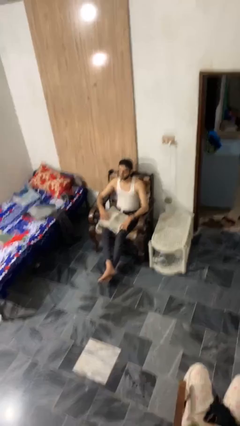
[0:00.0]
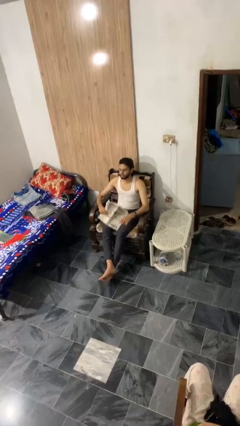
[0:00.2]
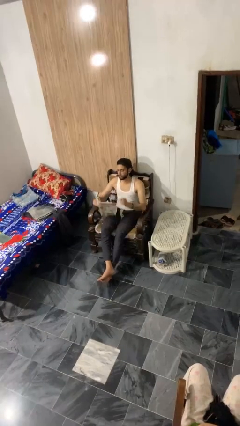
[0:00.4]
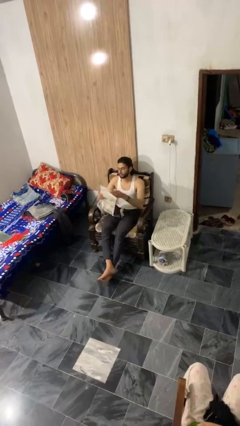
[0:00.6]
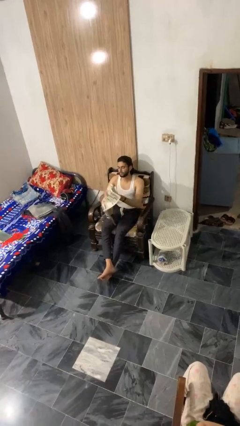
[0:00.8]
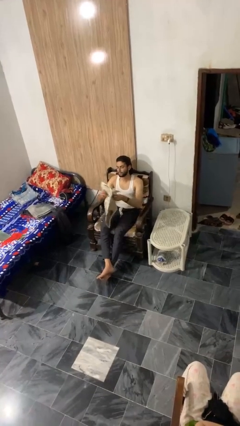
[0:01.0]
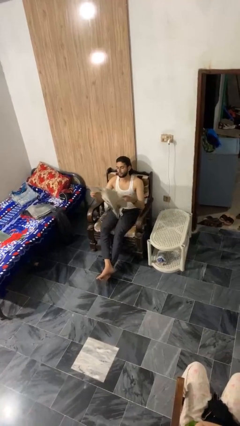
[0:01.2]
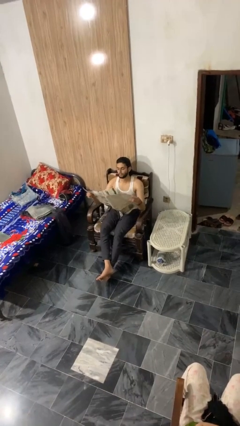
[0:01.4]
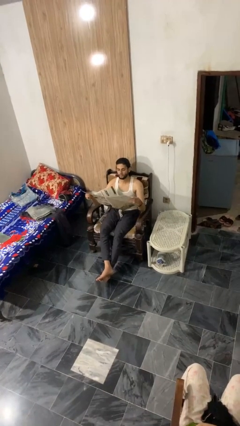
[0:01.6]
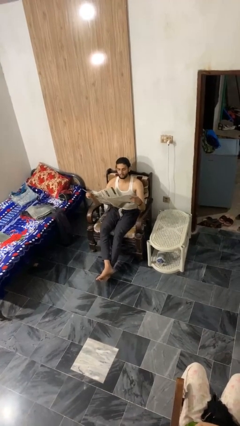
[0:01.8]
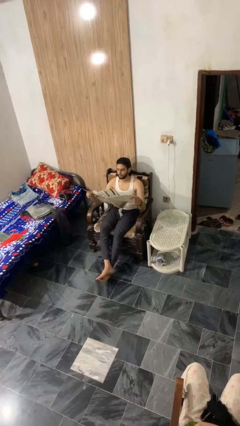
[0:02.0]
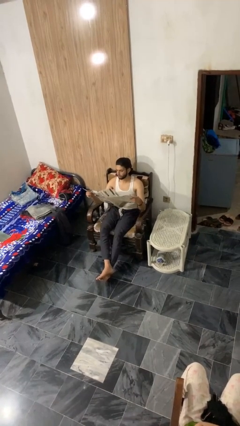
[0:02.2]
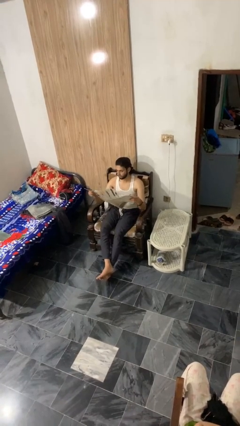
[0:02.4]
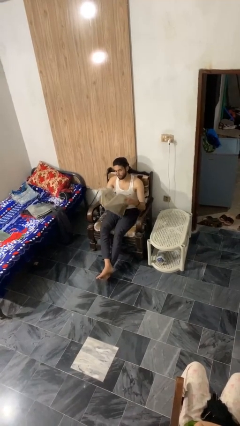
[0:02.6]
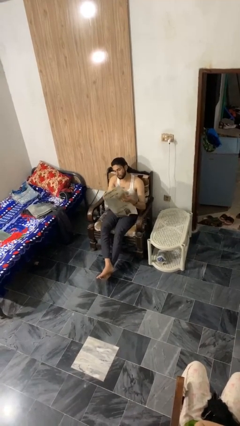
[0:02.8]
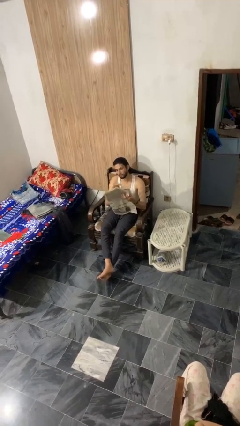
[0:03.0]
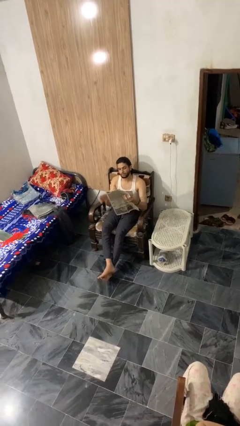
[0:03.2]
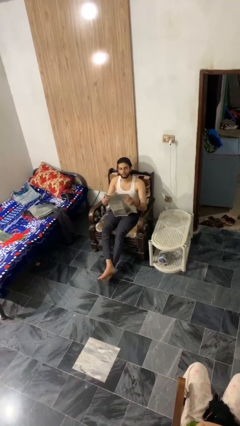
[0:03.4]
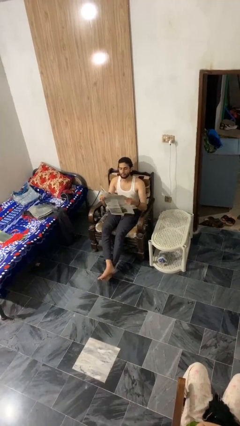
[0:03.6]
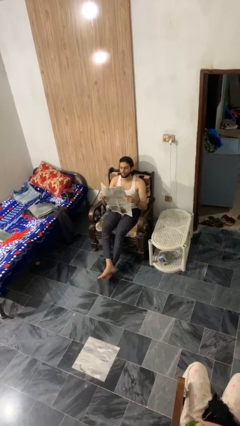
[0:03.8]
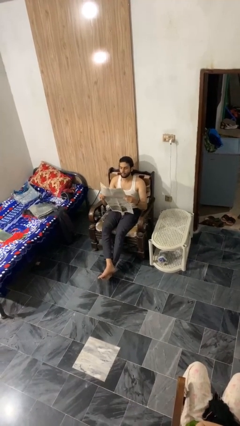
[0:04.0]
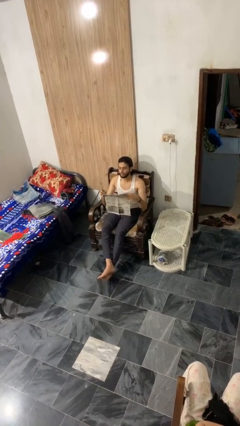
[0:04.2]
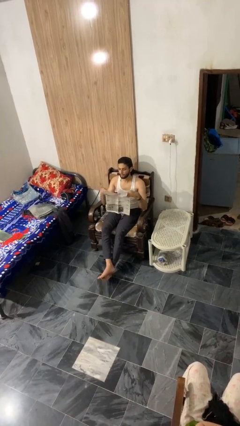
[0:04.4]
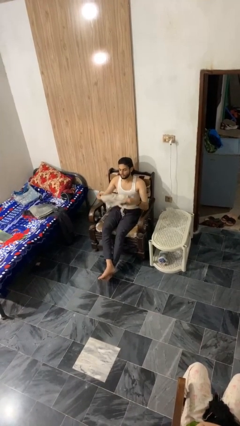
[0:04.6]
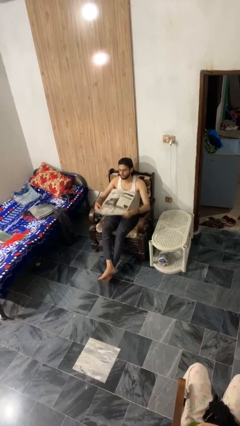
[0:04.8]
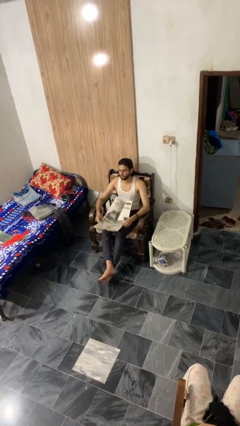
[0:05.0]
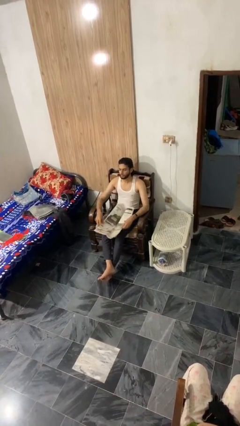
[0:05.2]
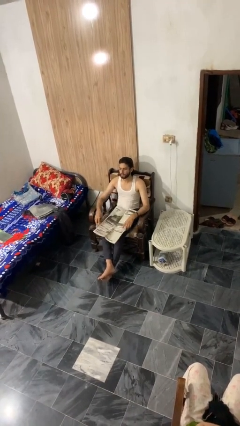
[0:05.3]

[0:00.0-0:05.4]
person reads newspaper

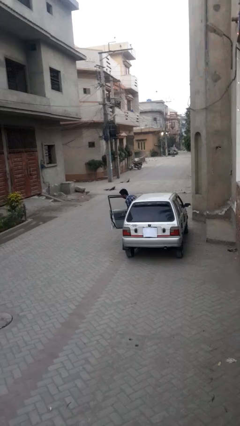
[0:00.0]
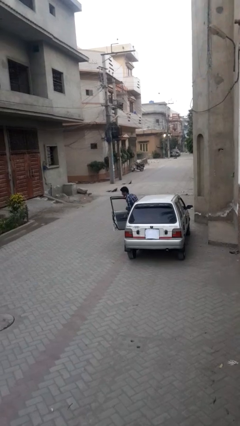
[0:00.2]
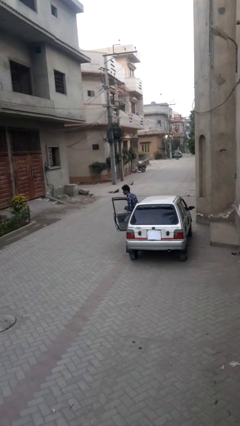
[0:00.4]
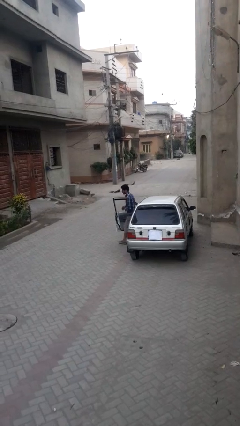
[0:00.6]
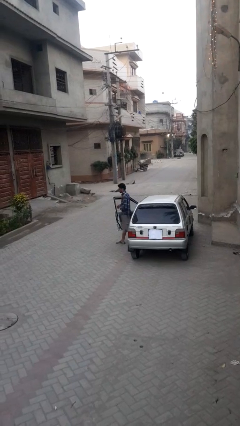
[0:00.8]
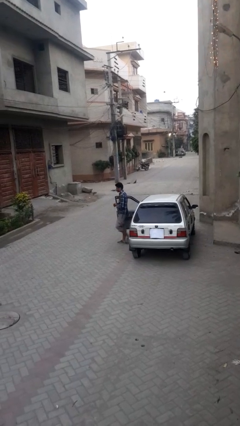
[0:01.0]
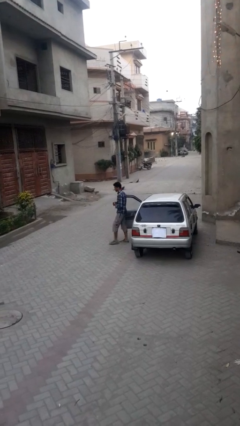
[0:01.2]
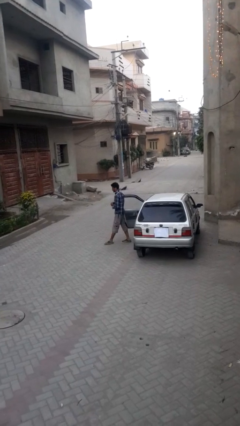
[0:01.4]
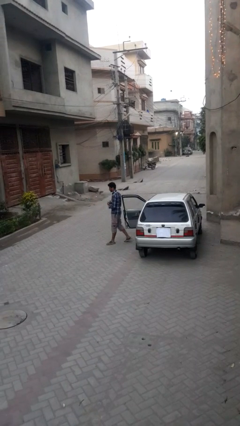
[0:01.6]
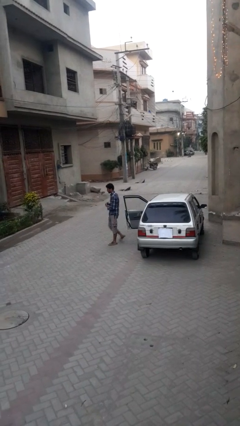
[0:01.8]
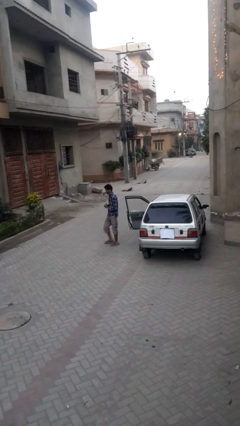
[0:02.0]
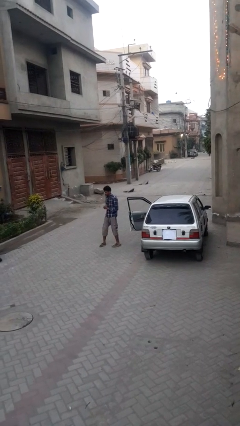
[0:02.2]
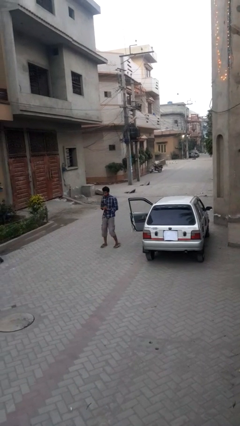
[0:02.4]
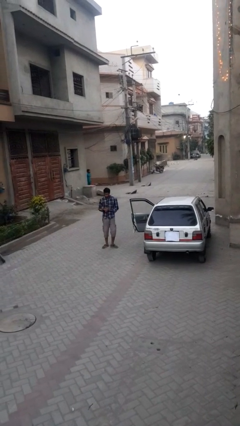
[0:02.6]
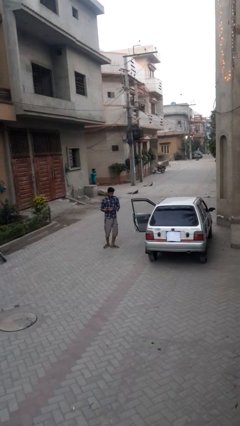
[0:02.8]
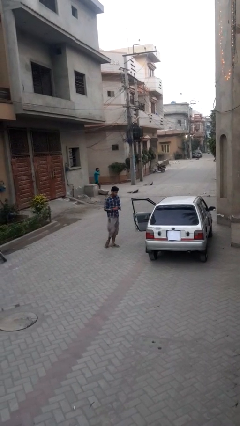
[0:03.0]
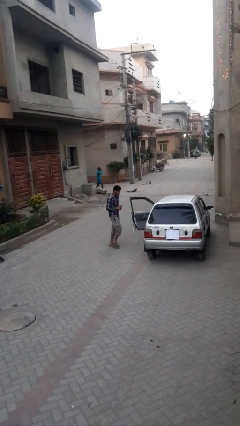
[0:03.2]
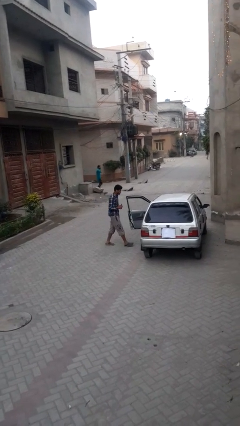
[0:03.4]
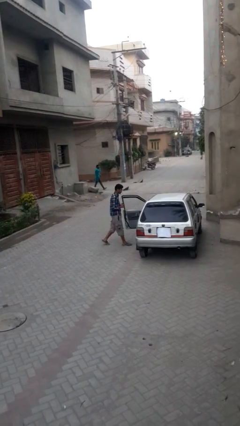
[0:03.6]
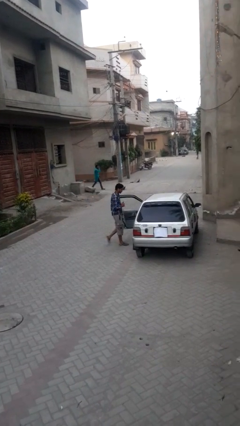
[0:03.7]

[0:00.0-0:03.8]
person exits car

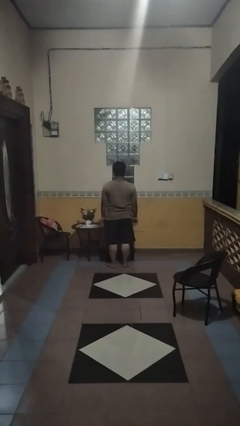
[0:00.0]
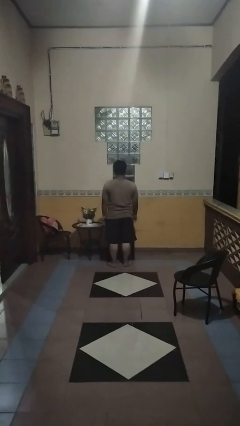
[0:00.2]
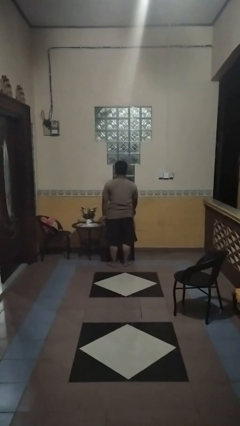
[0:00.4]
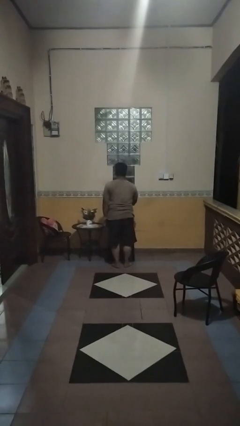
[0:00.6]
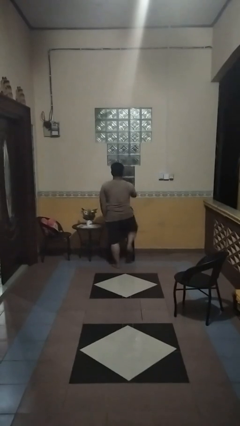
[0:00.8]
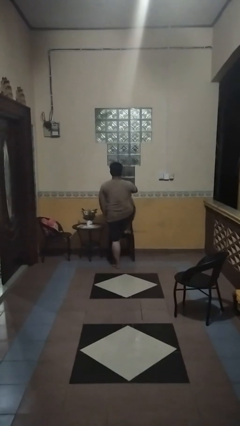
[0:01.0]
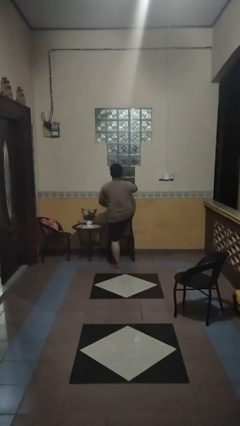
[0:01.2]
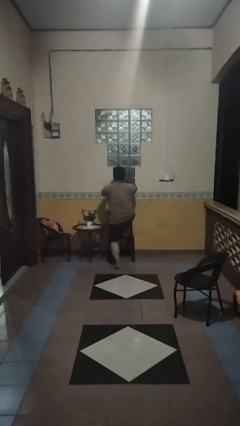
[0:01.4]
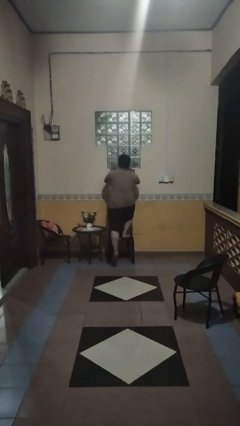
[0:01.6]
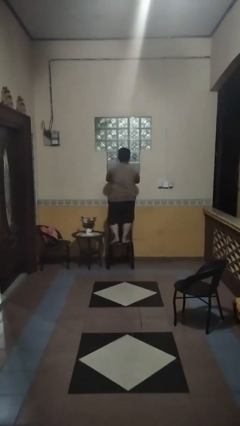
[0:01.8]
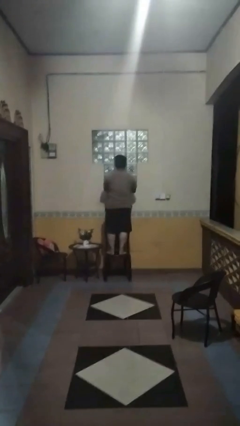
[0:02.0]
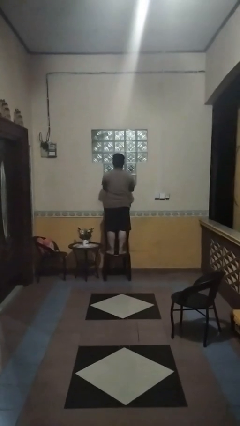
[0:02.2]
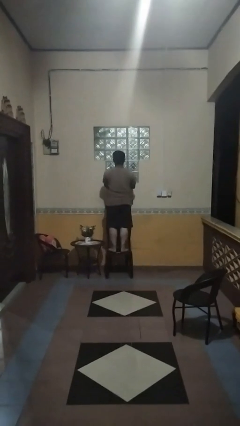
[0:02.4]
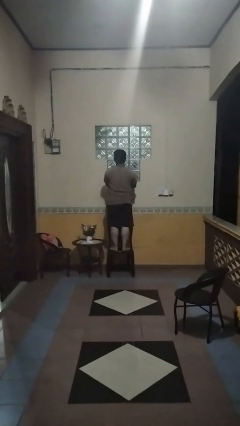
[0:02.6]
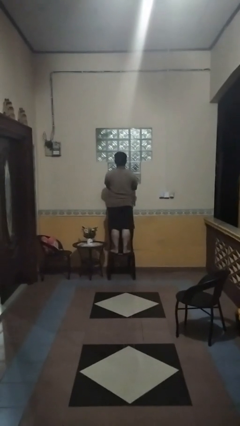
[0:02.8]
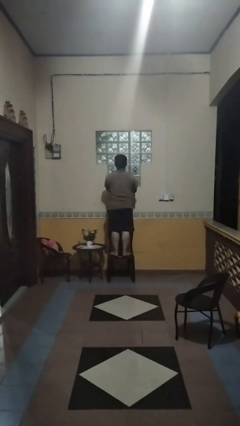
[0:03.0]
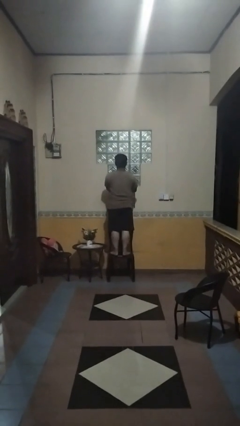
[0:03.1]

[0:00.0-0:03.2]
person climbs on chair

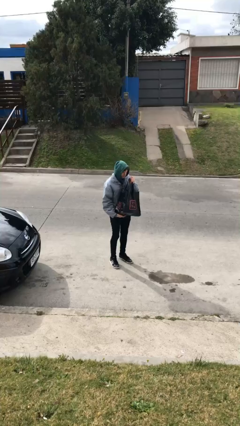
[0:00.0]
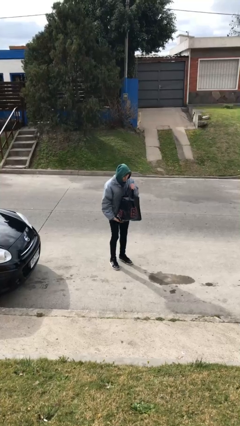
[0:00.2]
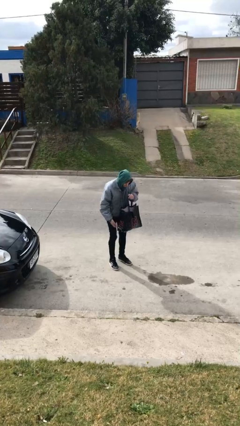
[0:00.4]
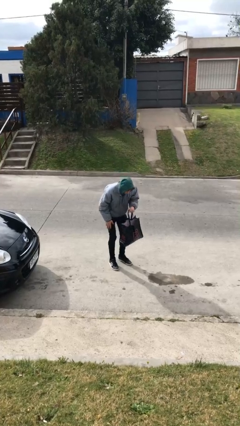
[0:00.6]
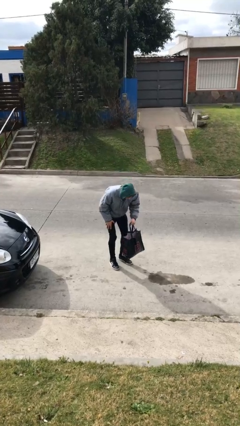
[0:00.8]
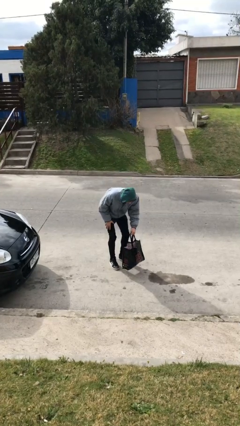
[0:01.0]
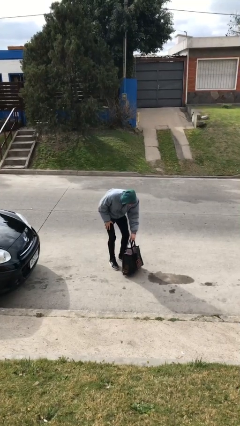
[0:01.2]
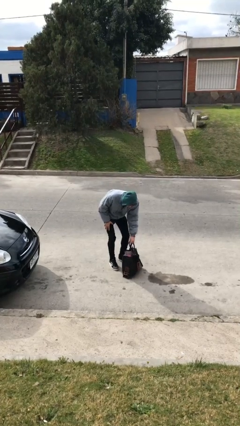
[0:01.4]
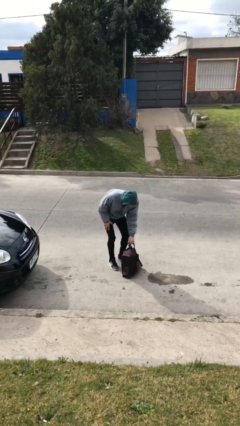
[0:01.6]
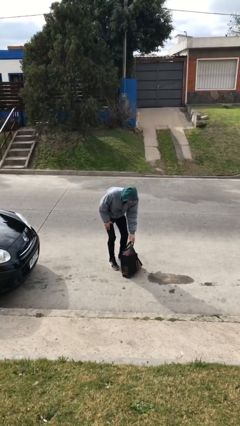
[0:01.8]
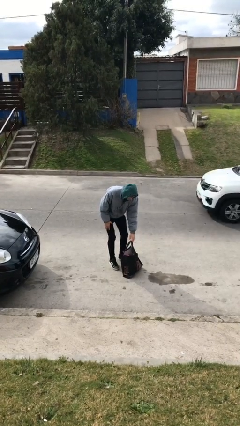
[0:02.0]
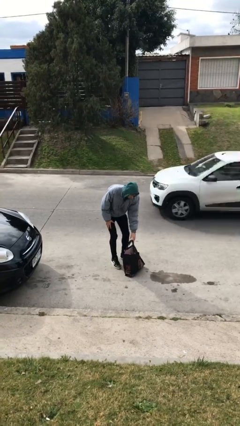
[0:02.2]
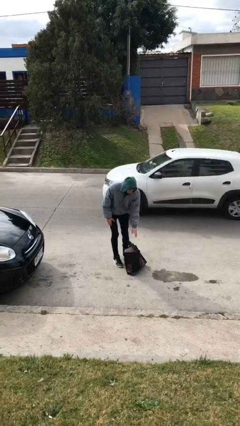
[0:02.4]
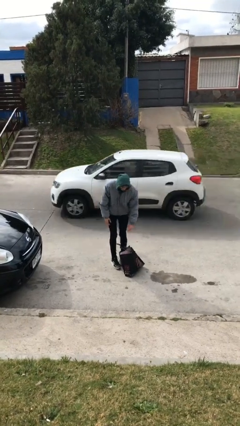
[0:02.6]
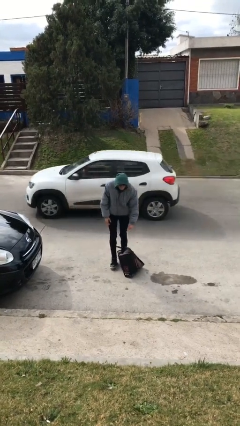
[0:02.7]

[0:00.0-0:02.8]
person puts down object on floor

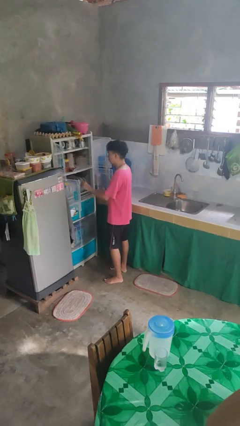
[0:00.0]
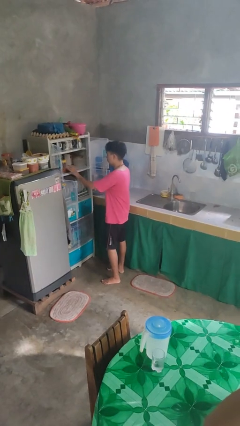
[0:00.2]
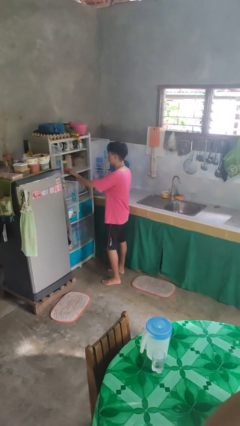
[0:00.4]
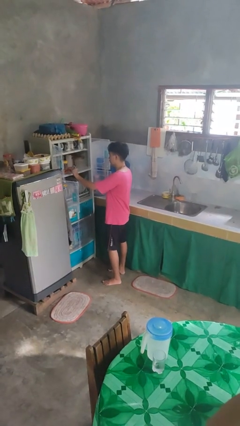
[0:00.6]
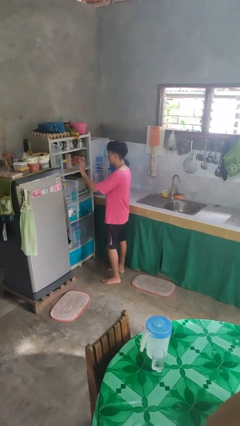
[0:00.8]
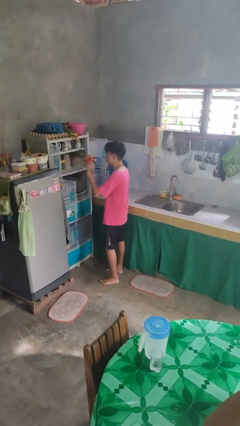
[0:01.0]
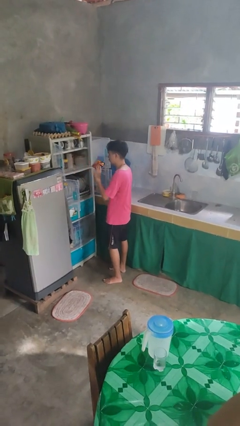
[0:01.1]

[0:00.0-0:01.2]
person takes object from cabinet

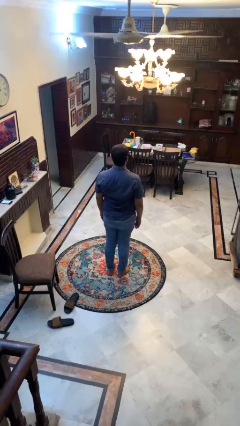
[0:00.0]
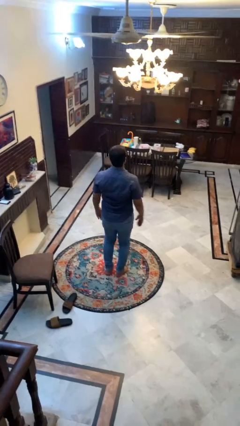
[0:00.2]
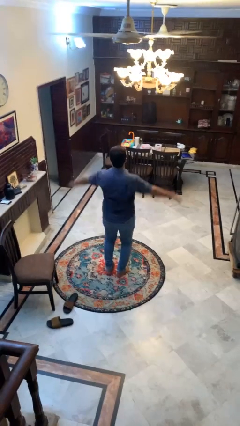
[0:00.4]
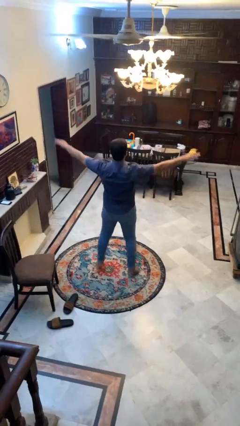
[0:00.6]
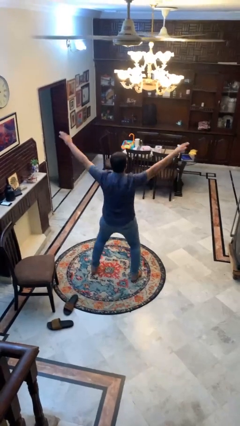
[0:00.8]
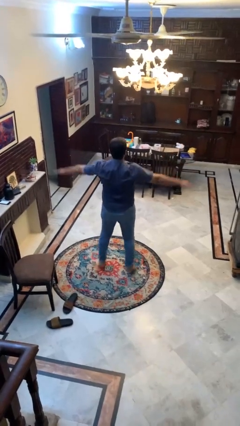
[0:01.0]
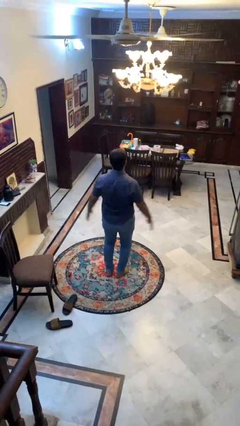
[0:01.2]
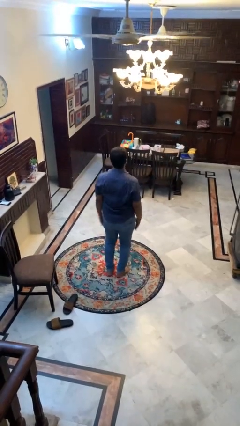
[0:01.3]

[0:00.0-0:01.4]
person exercises with jumping jacks
